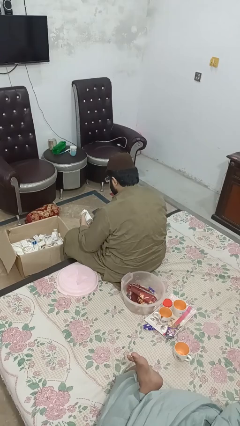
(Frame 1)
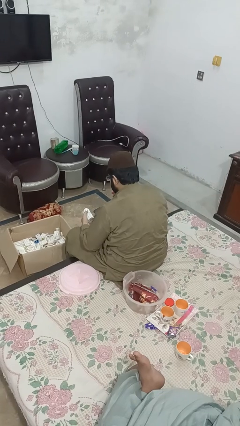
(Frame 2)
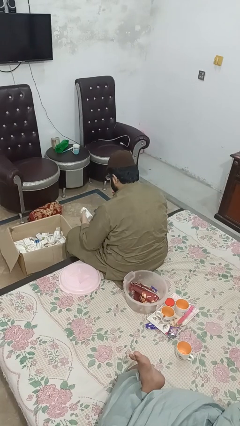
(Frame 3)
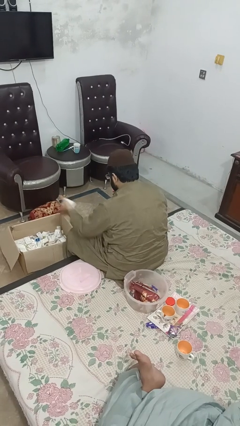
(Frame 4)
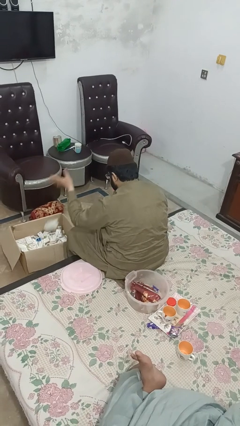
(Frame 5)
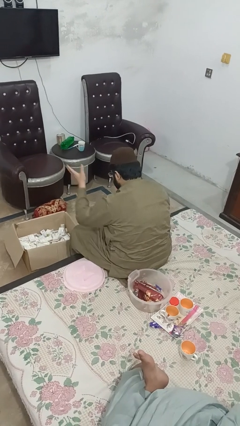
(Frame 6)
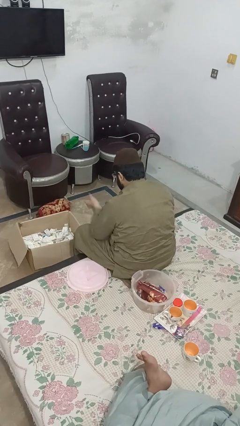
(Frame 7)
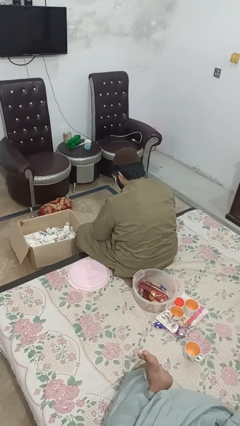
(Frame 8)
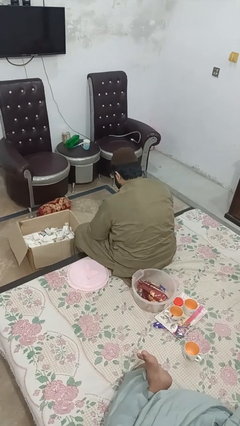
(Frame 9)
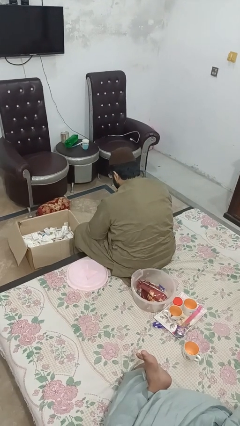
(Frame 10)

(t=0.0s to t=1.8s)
person puts object into box

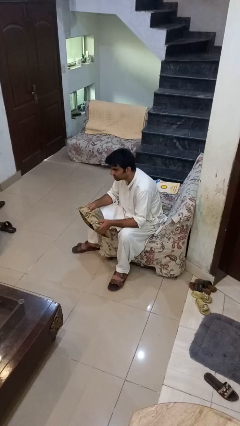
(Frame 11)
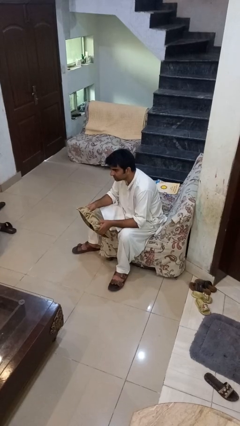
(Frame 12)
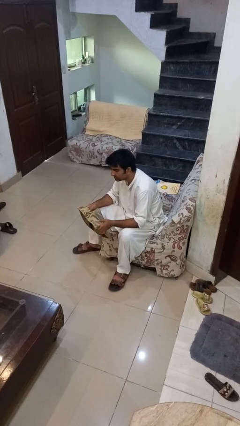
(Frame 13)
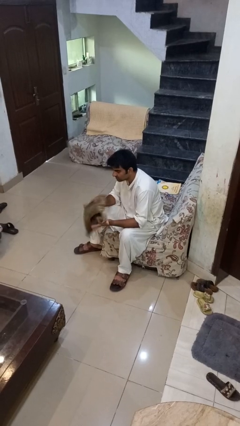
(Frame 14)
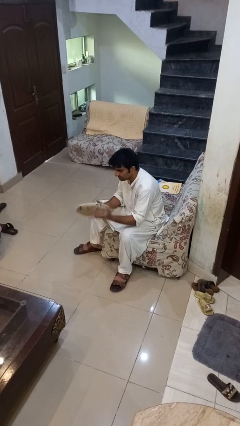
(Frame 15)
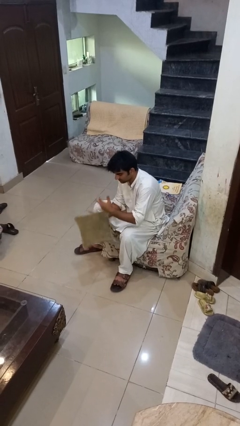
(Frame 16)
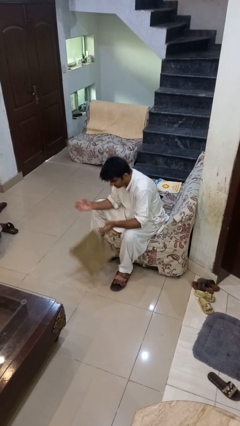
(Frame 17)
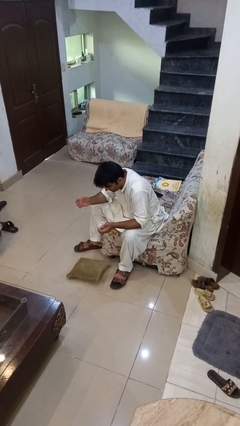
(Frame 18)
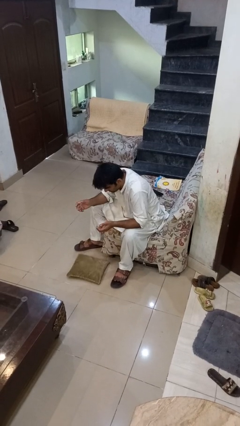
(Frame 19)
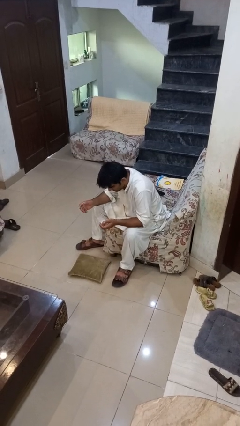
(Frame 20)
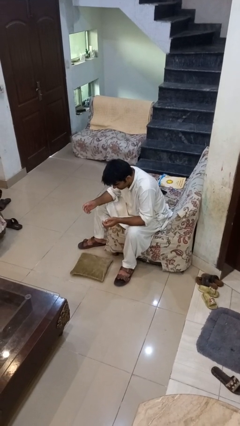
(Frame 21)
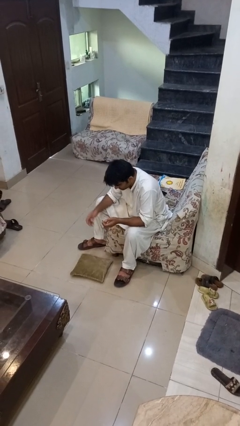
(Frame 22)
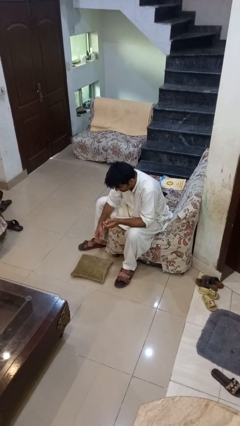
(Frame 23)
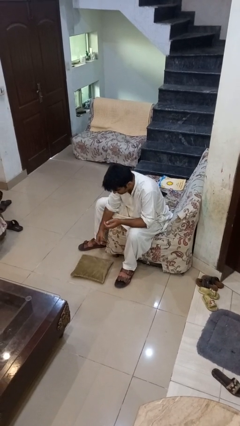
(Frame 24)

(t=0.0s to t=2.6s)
person drops object

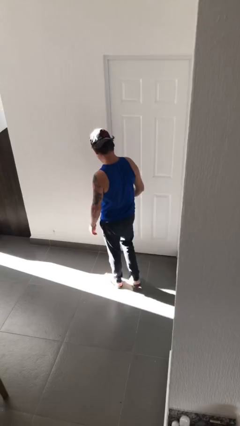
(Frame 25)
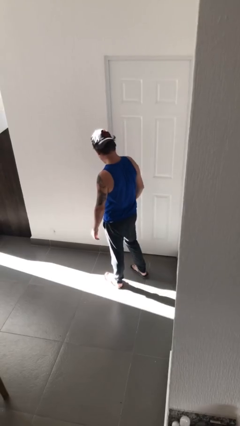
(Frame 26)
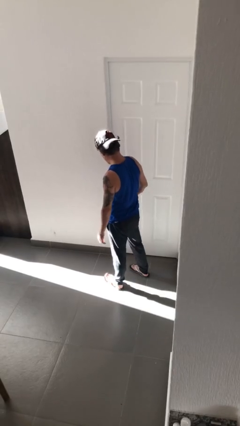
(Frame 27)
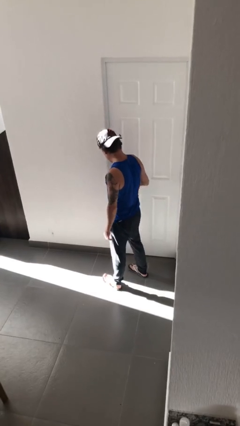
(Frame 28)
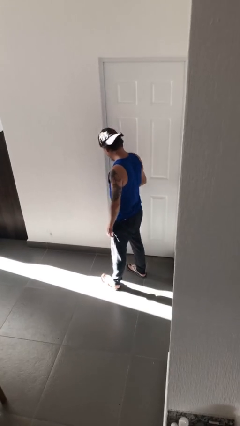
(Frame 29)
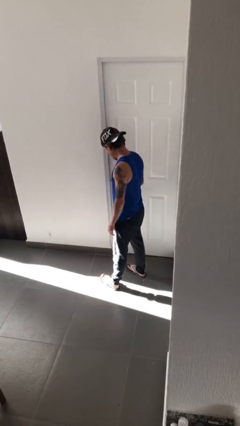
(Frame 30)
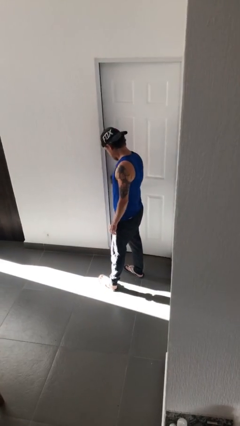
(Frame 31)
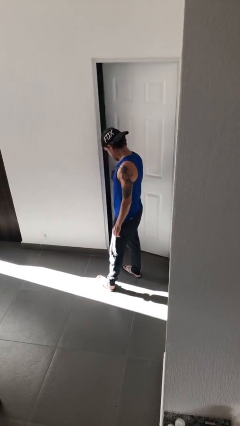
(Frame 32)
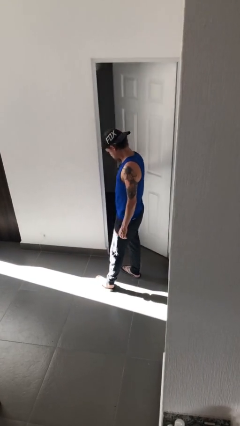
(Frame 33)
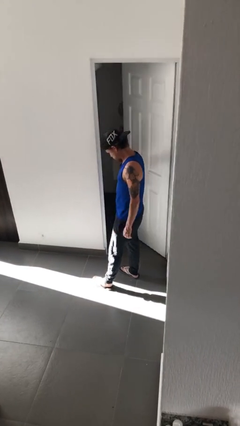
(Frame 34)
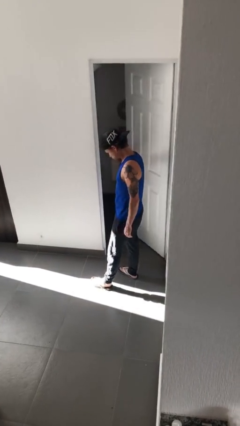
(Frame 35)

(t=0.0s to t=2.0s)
person opens facility door

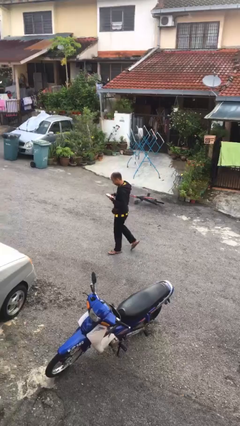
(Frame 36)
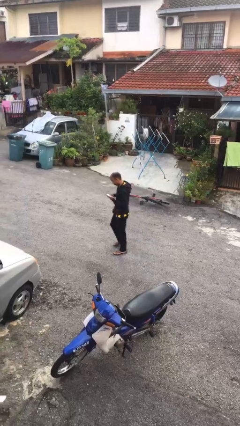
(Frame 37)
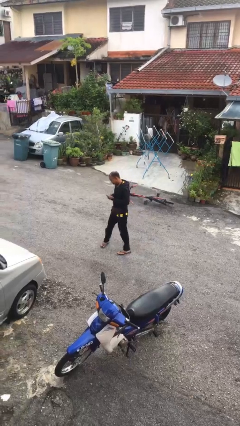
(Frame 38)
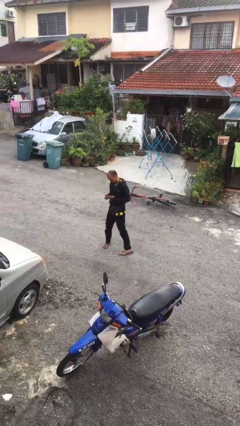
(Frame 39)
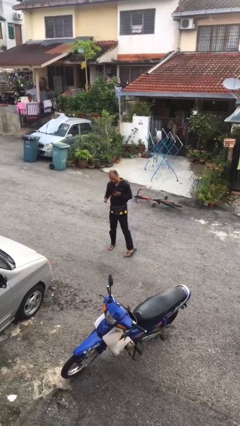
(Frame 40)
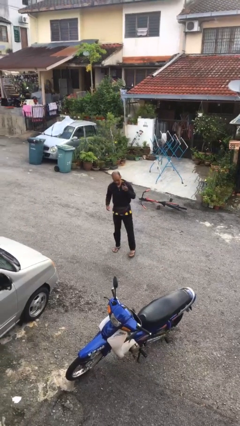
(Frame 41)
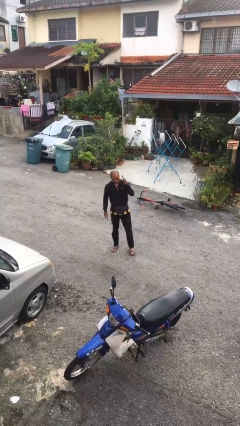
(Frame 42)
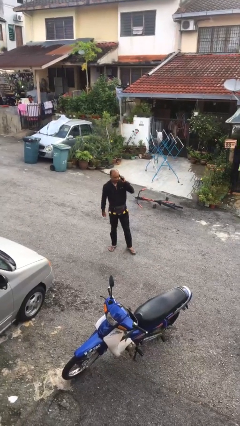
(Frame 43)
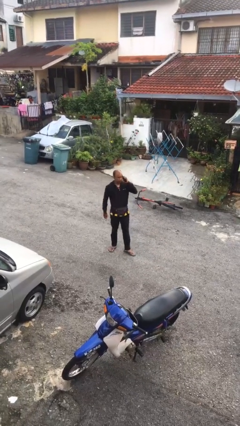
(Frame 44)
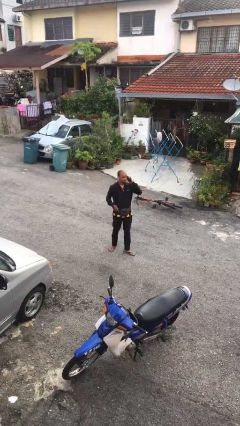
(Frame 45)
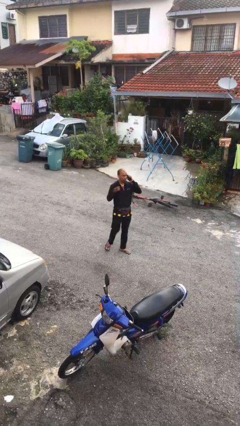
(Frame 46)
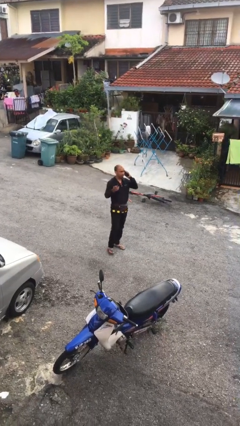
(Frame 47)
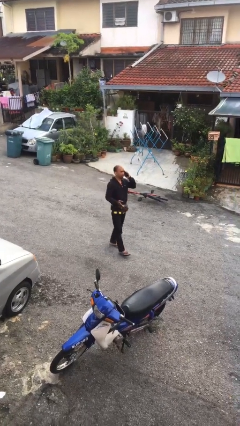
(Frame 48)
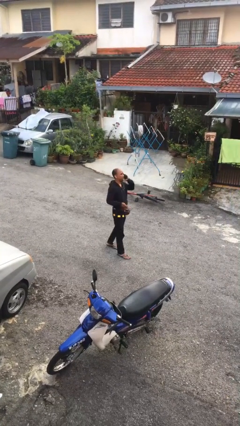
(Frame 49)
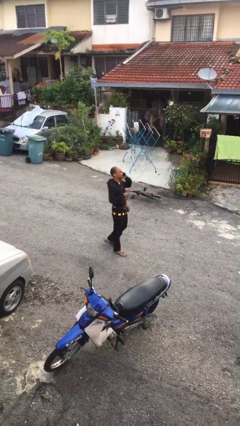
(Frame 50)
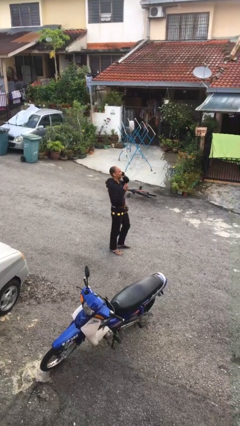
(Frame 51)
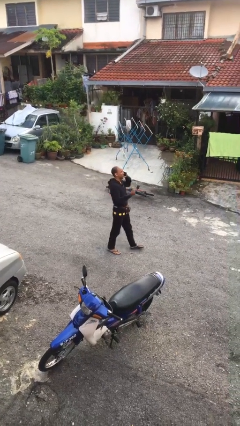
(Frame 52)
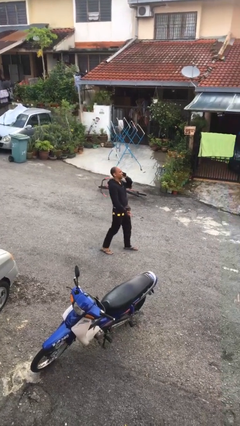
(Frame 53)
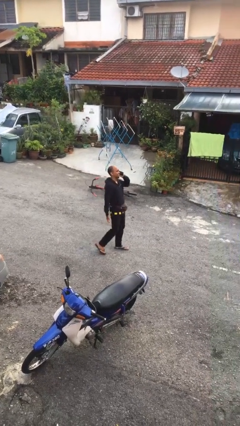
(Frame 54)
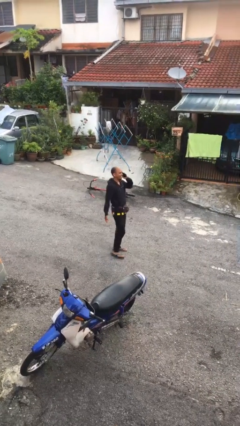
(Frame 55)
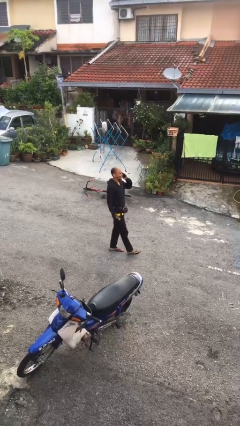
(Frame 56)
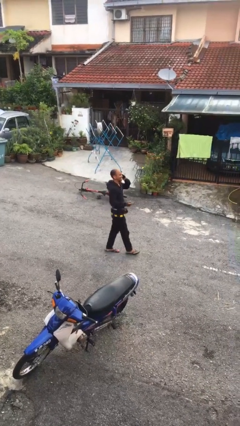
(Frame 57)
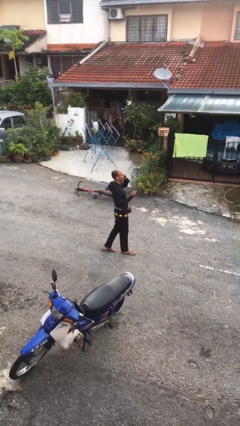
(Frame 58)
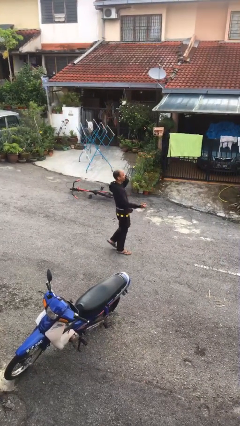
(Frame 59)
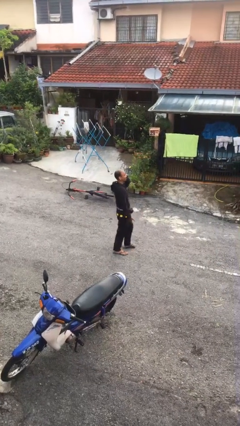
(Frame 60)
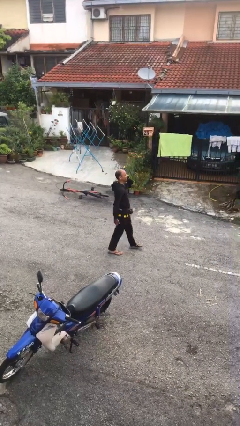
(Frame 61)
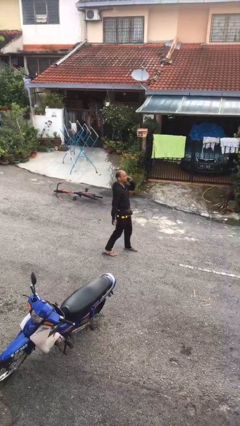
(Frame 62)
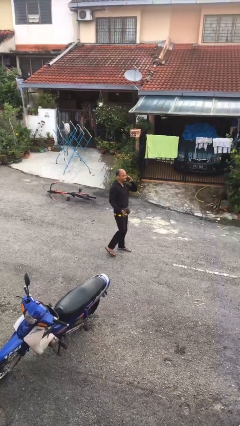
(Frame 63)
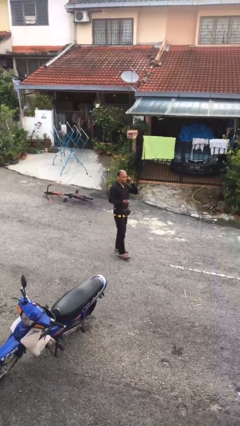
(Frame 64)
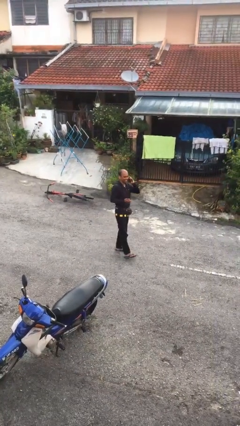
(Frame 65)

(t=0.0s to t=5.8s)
person talks on phone

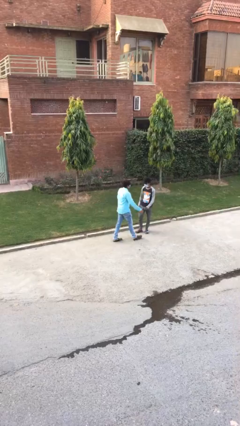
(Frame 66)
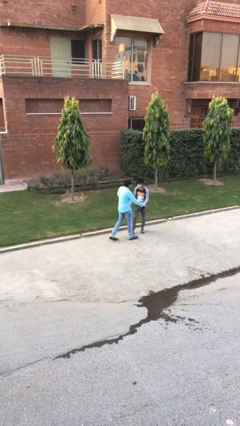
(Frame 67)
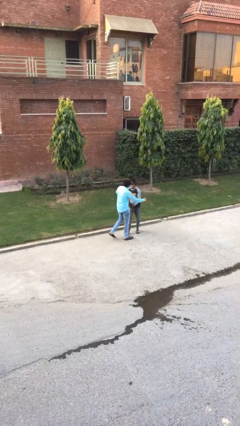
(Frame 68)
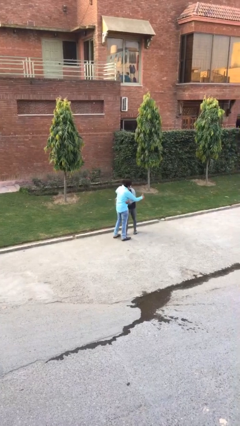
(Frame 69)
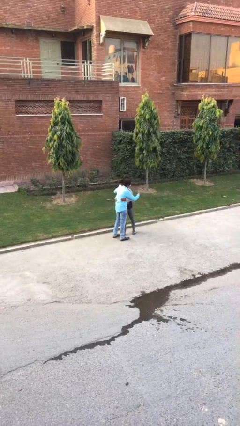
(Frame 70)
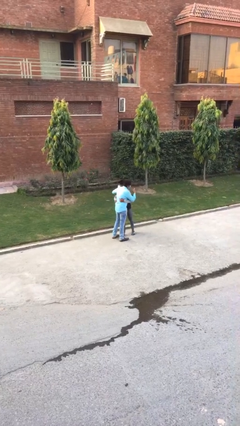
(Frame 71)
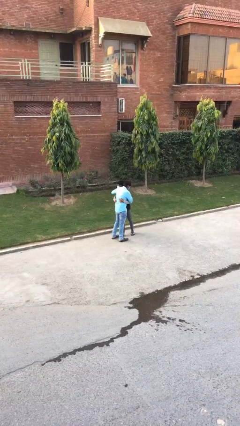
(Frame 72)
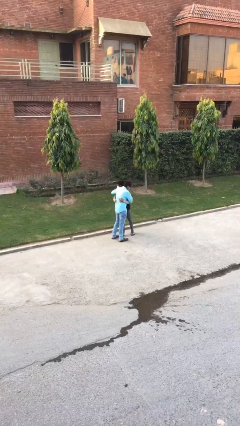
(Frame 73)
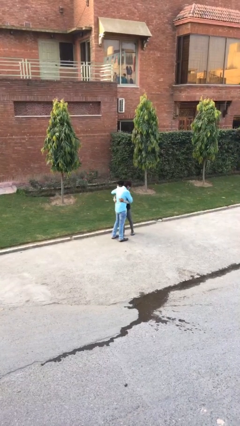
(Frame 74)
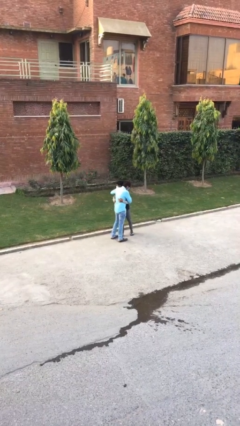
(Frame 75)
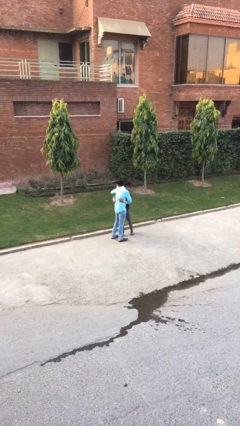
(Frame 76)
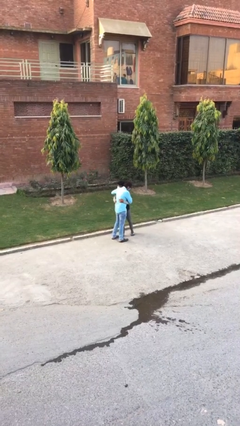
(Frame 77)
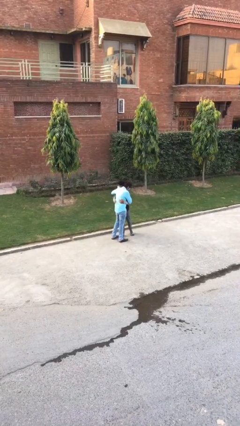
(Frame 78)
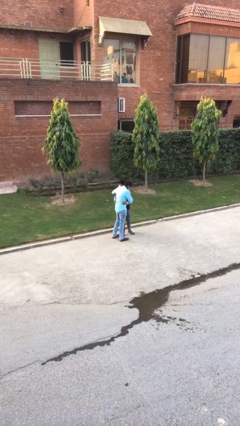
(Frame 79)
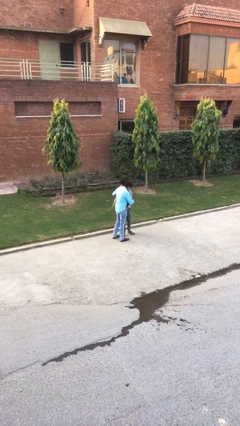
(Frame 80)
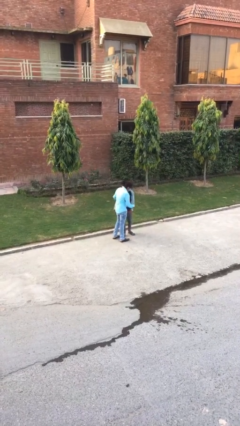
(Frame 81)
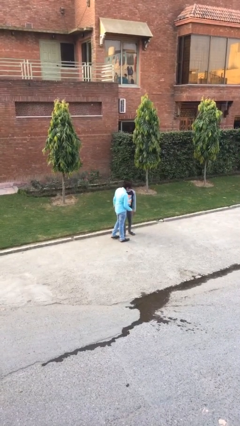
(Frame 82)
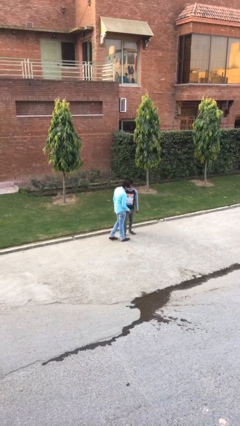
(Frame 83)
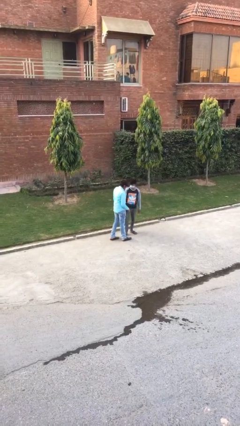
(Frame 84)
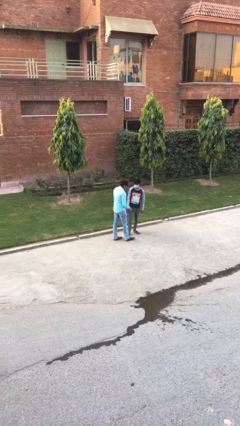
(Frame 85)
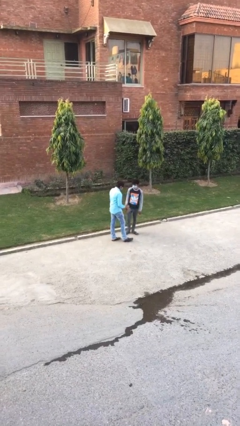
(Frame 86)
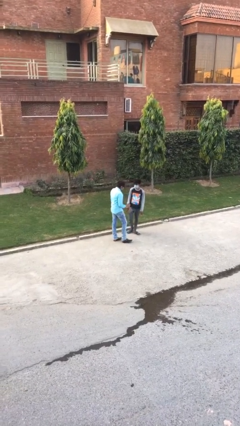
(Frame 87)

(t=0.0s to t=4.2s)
person embraces person

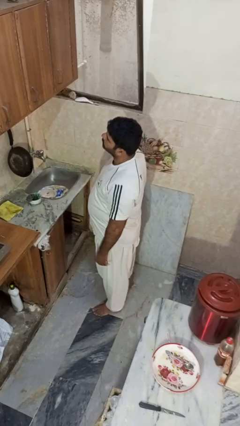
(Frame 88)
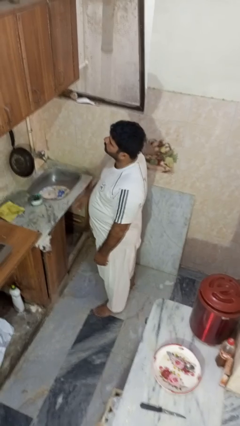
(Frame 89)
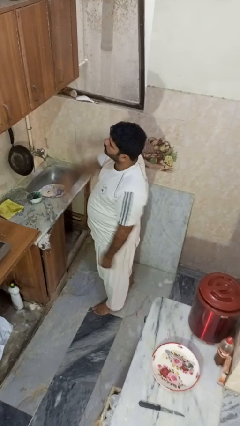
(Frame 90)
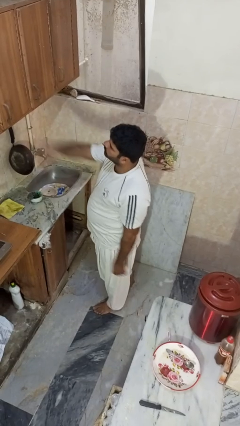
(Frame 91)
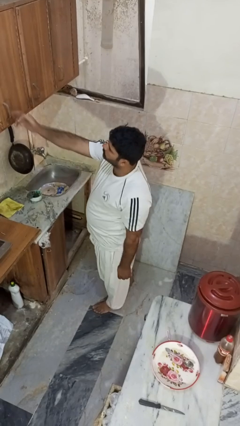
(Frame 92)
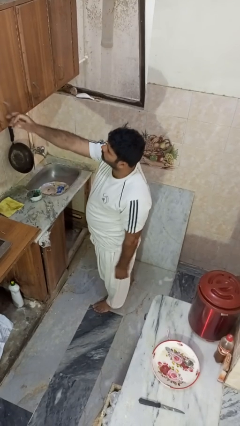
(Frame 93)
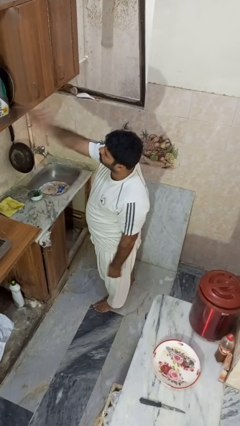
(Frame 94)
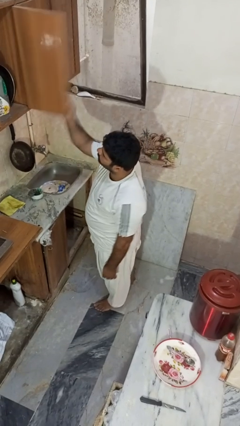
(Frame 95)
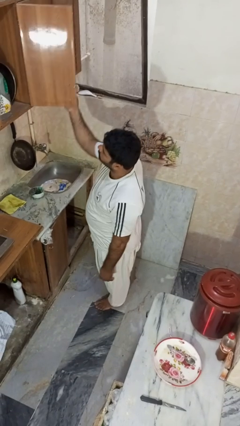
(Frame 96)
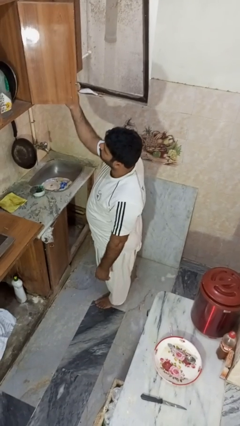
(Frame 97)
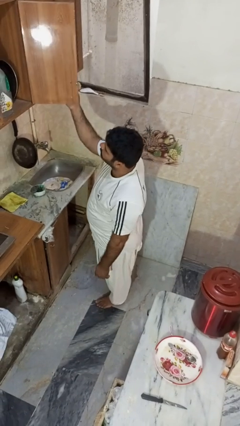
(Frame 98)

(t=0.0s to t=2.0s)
person opens cabinet
